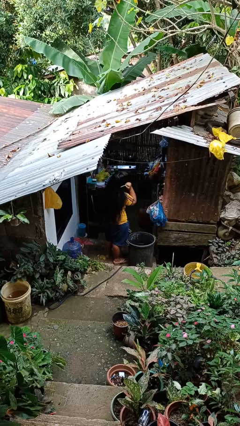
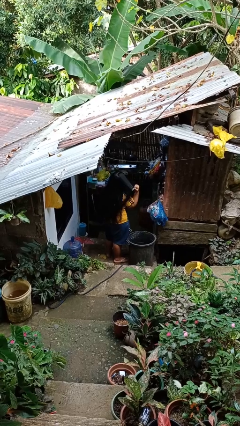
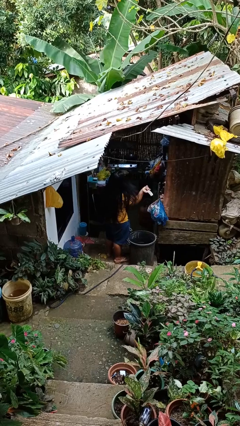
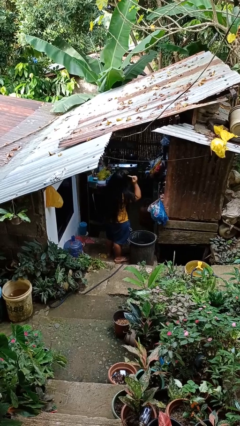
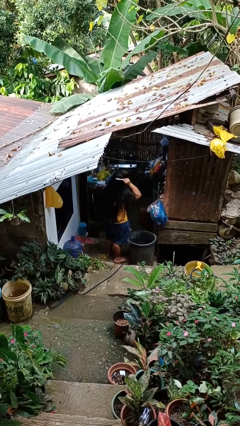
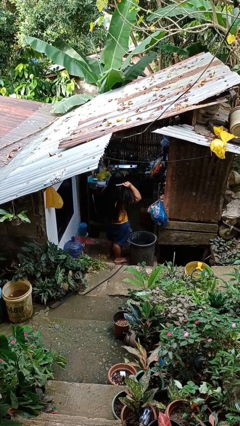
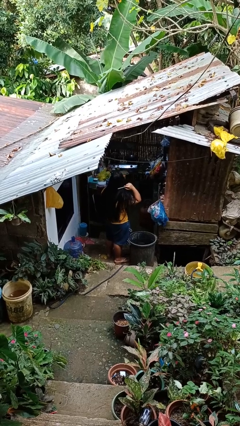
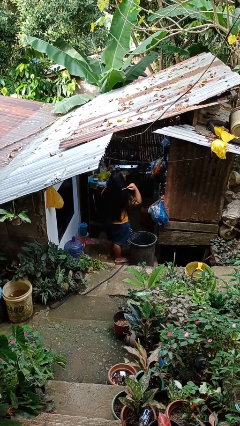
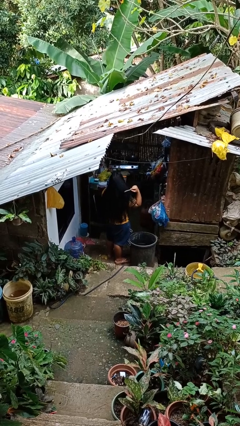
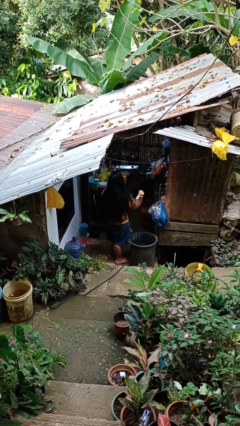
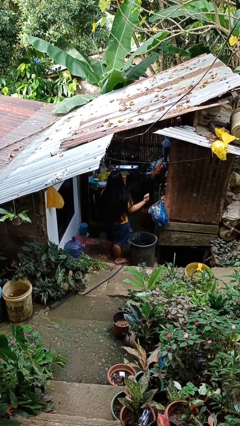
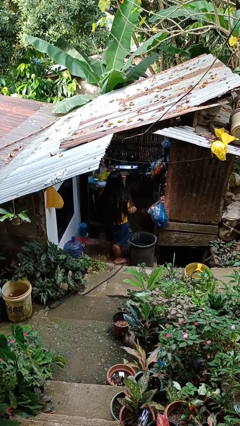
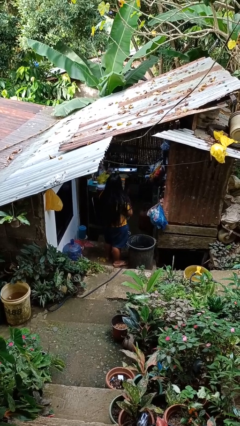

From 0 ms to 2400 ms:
person brushes hair

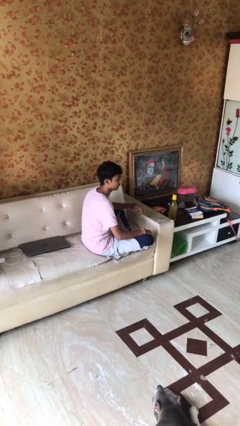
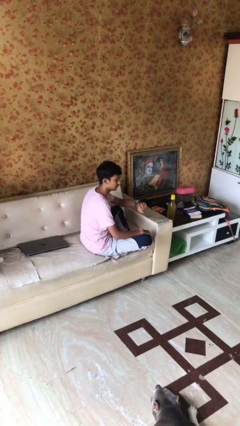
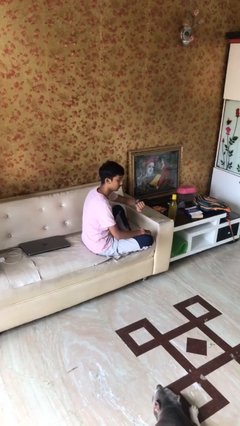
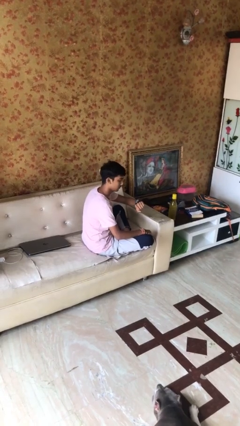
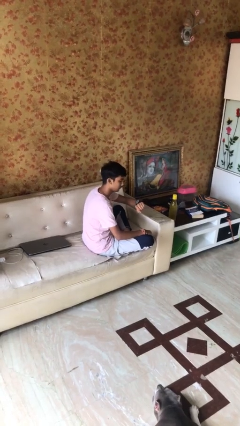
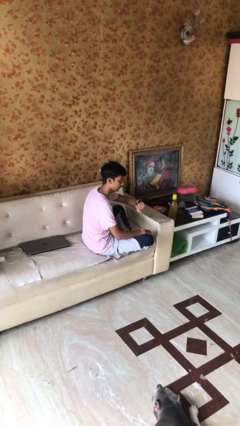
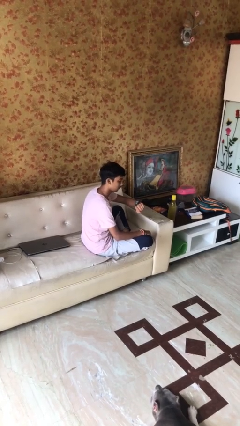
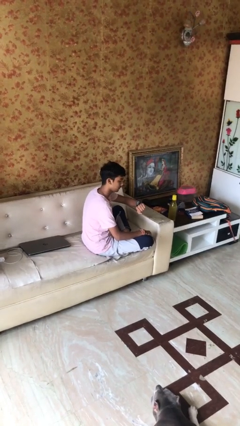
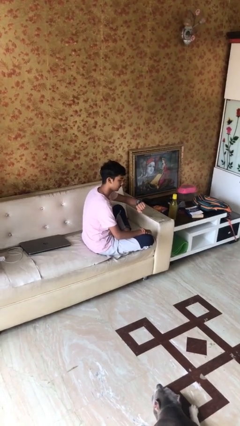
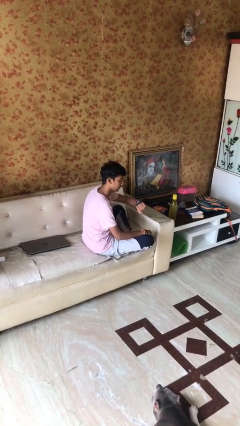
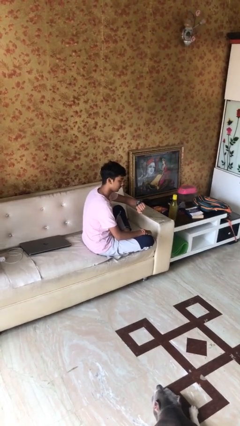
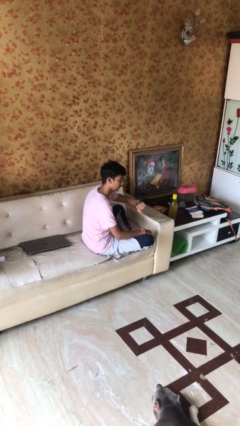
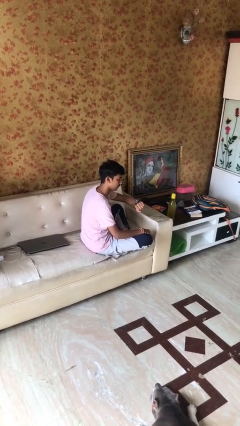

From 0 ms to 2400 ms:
person looks at wristwatch

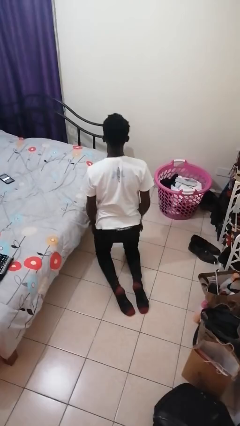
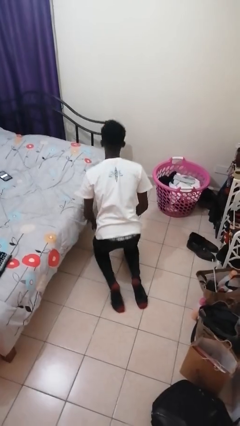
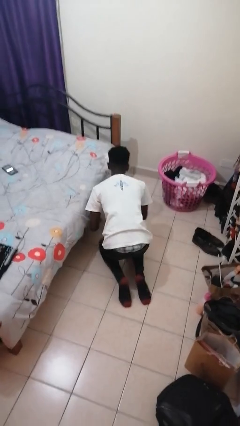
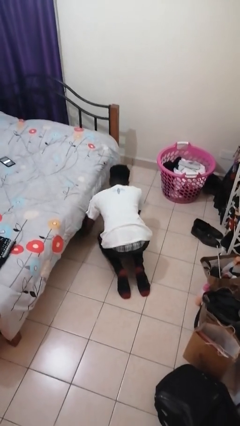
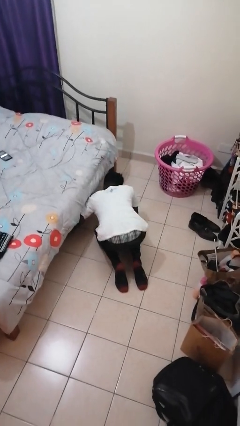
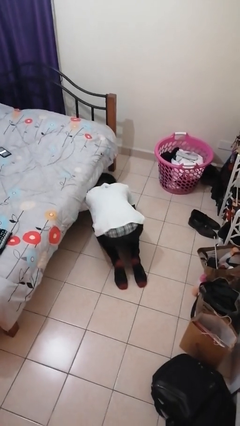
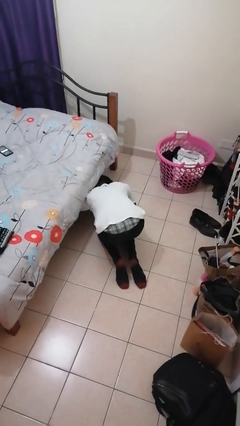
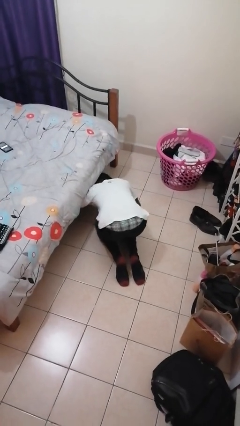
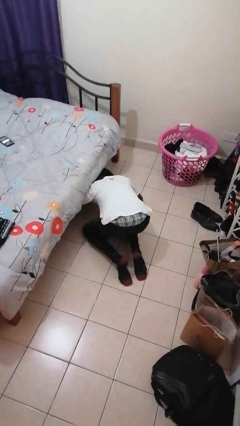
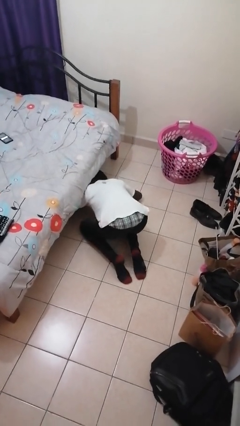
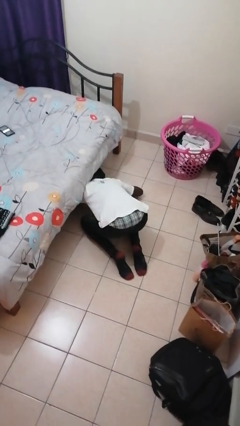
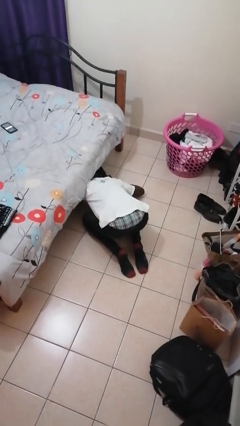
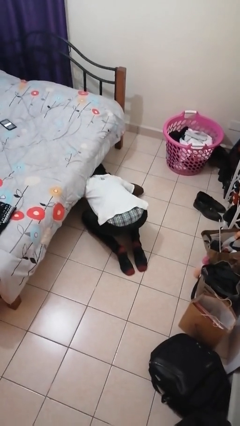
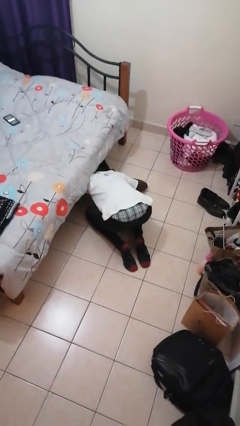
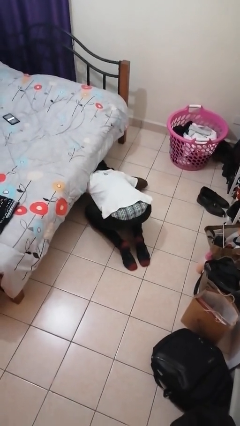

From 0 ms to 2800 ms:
person searches under bed

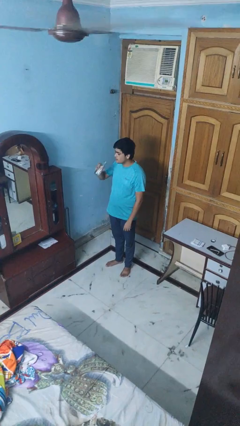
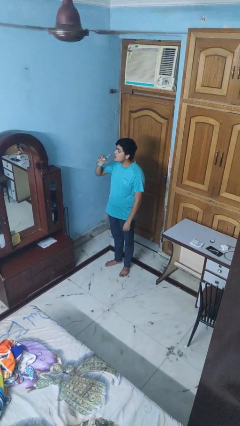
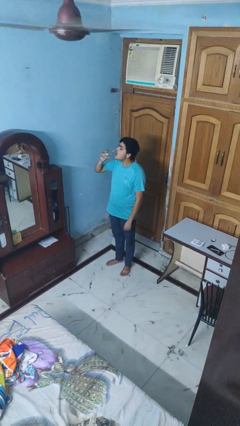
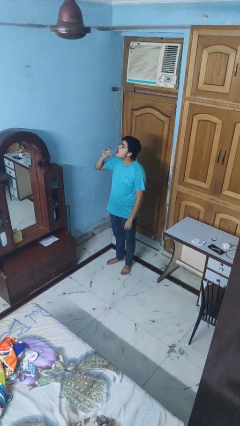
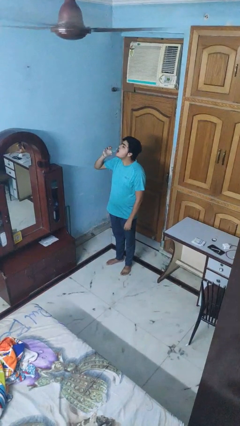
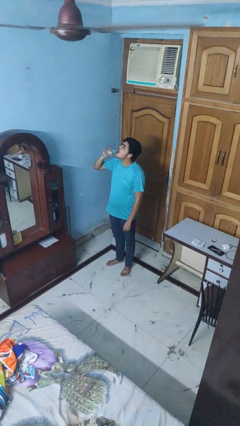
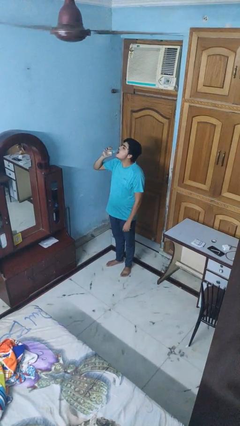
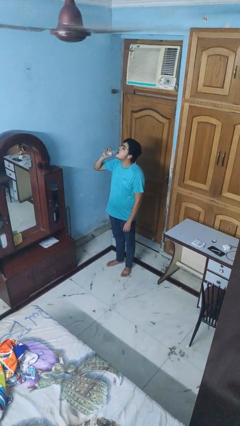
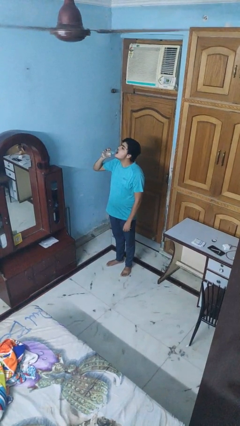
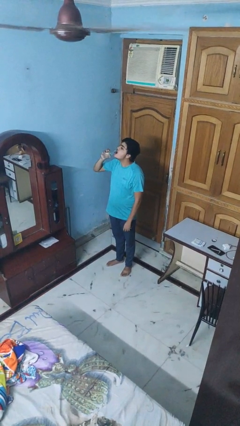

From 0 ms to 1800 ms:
person drinks from bottle

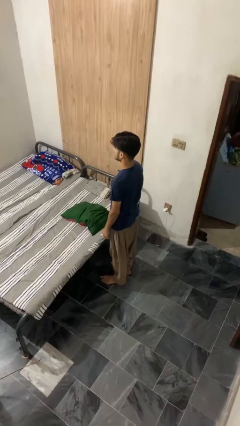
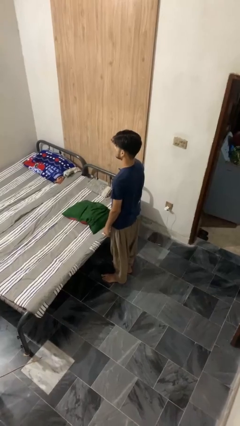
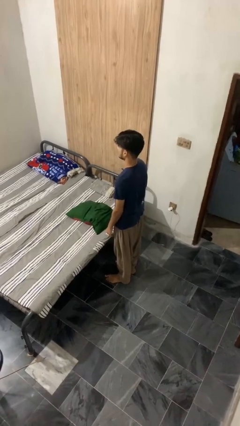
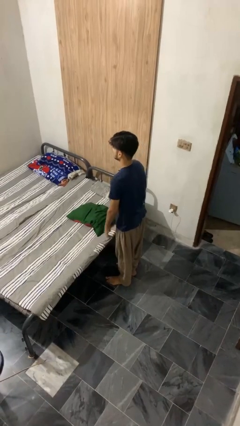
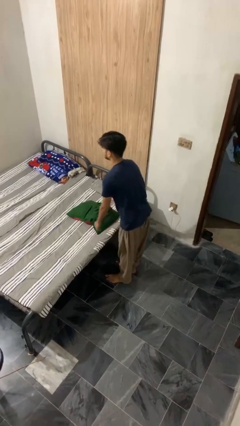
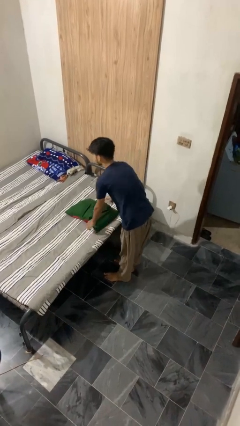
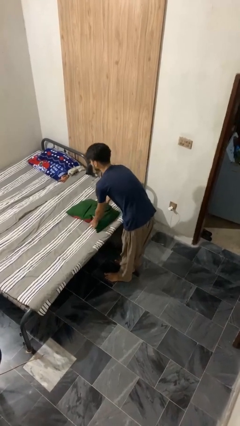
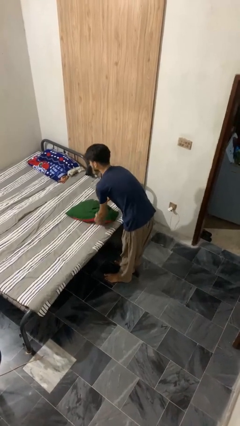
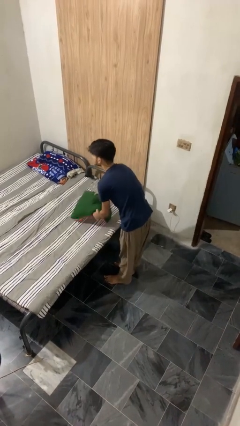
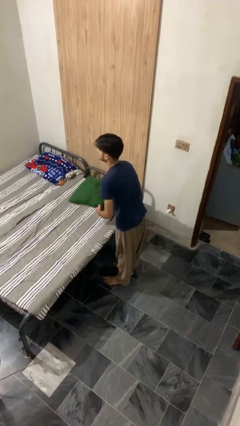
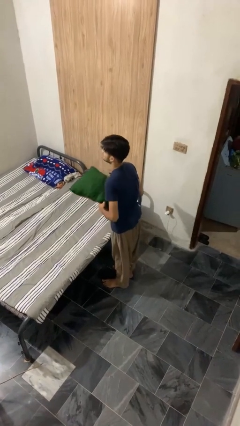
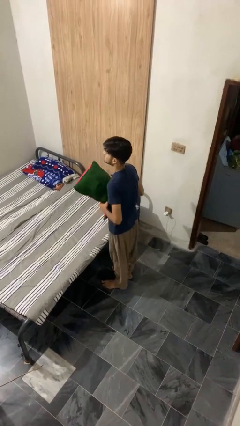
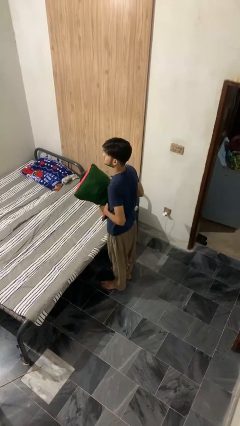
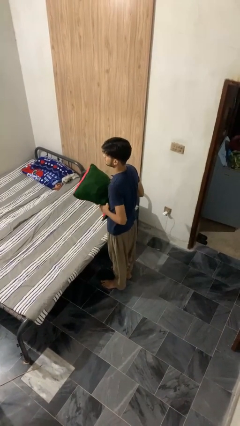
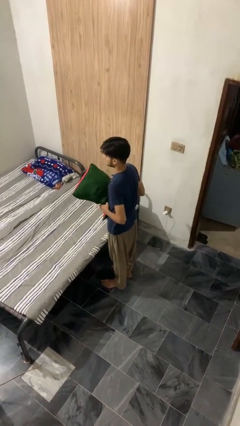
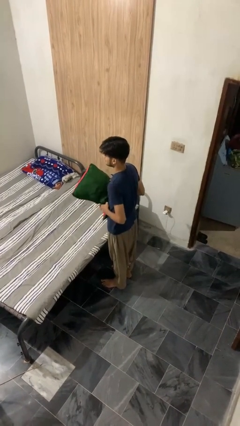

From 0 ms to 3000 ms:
person picks up object from bed

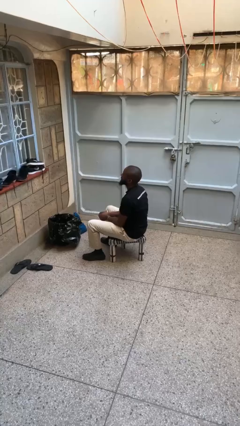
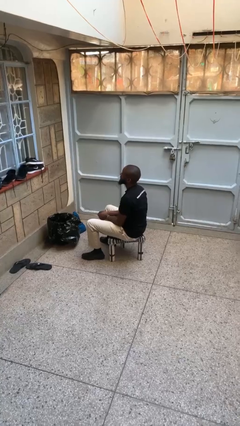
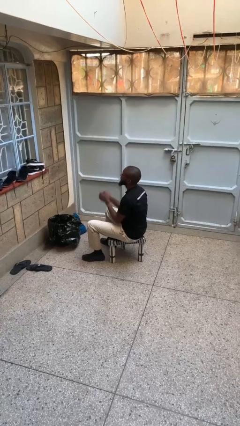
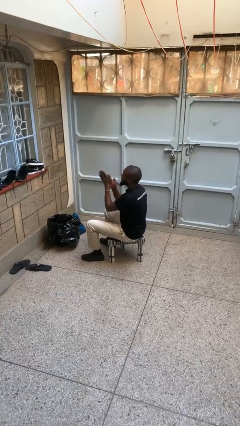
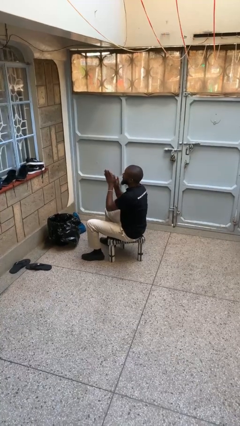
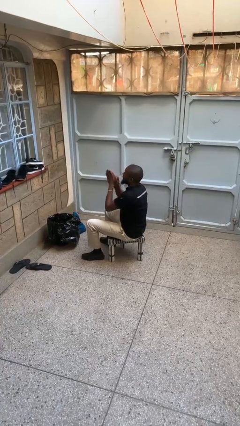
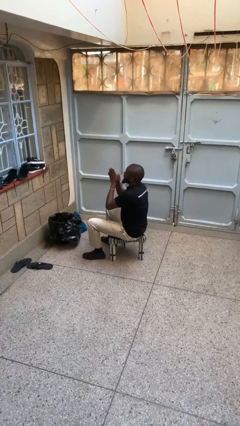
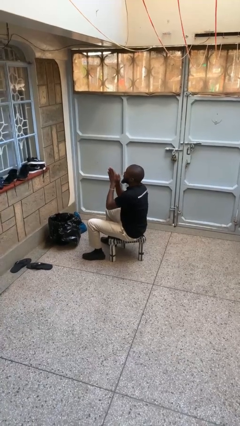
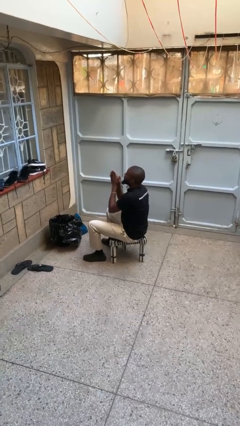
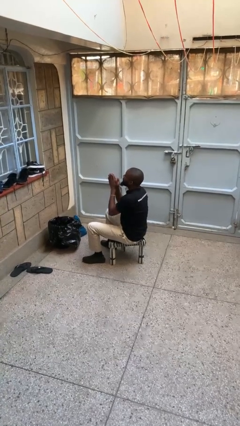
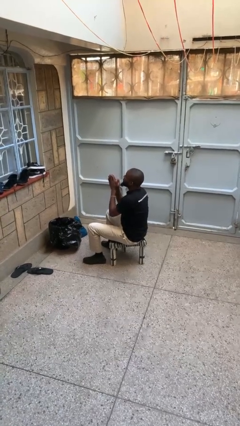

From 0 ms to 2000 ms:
person blows into hands

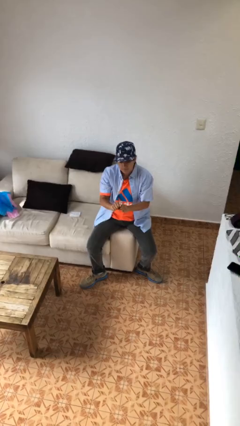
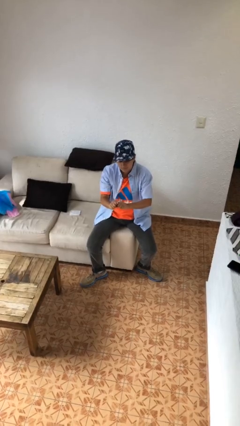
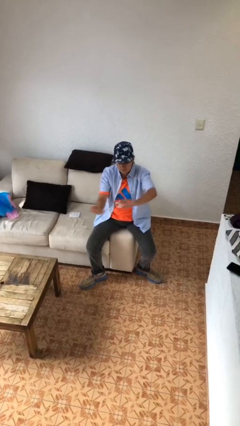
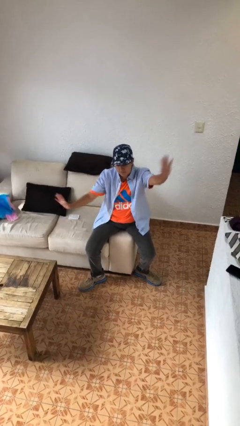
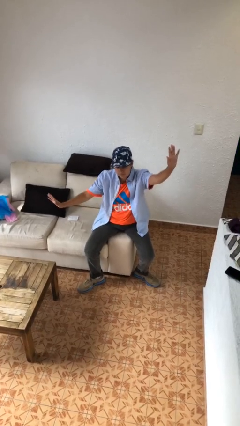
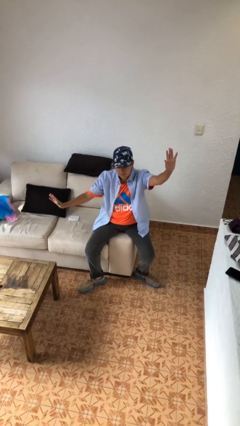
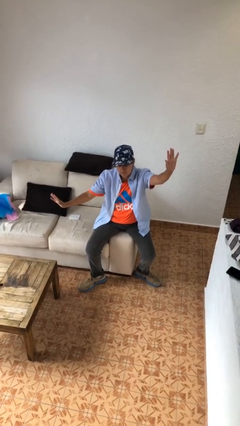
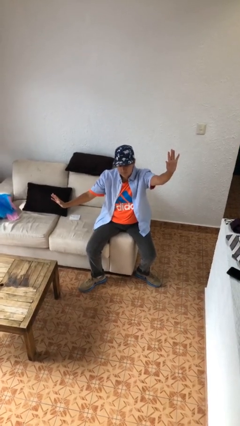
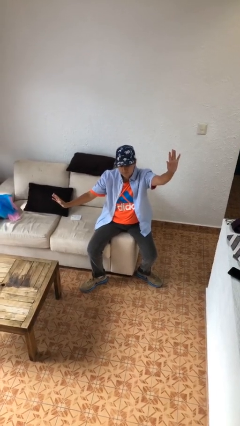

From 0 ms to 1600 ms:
person gestures zoom in

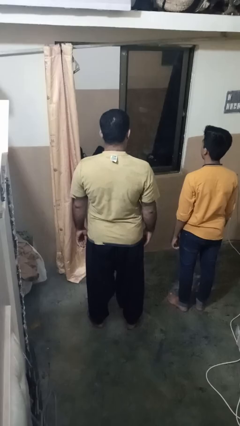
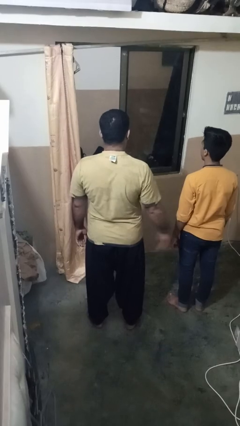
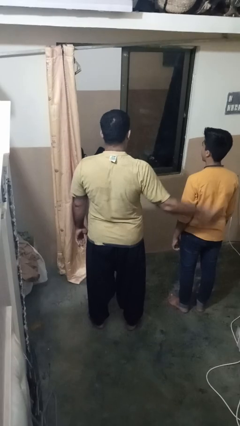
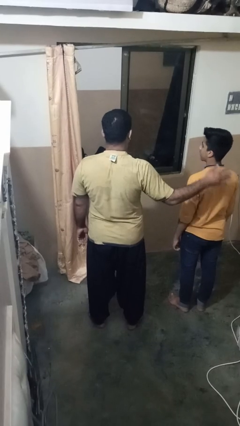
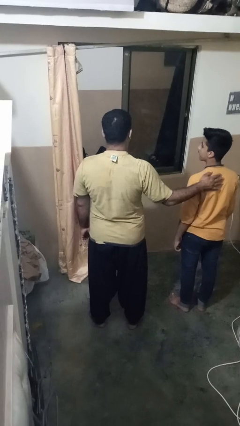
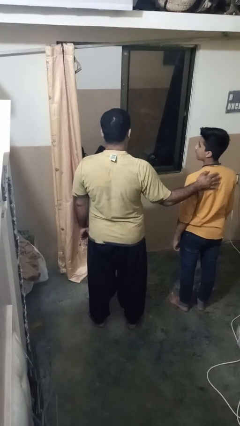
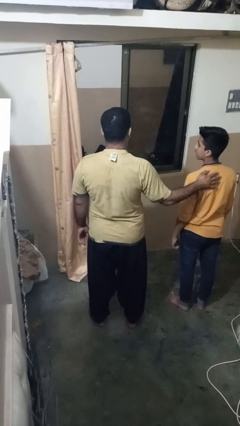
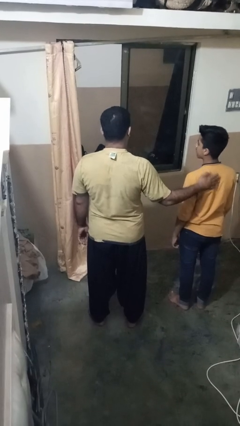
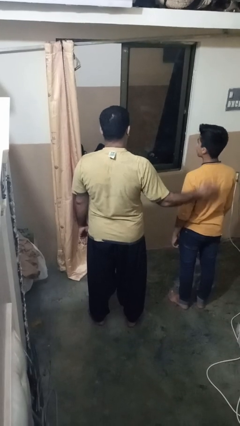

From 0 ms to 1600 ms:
person touches back of person
